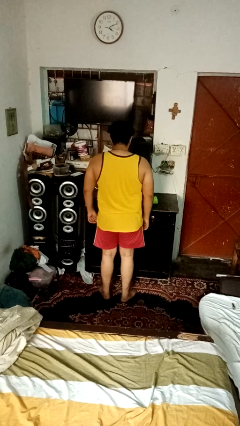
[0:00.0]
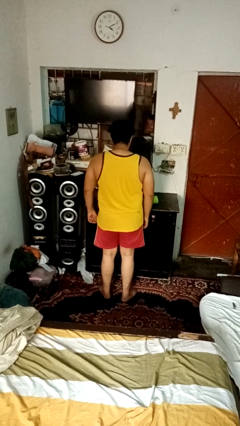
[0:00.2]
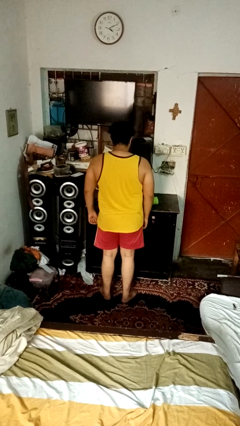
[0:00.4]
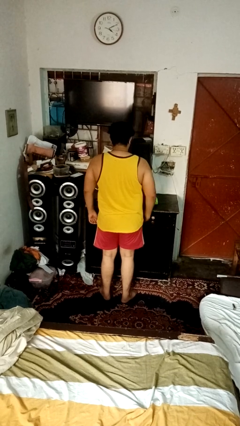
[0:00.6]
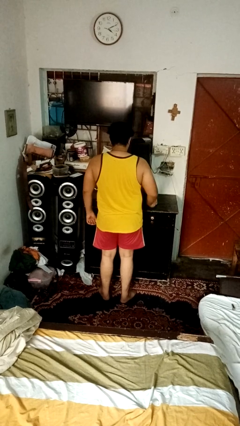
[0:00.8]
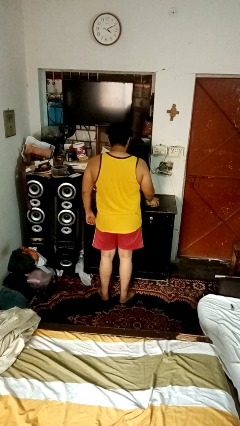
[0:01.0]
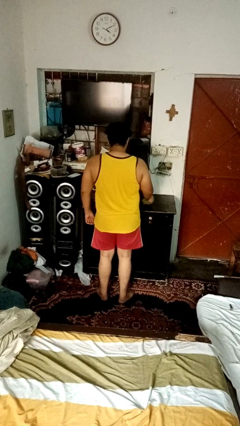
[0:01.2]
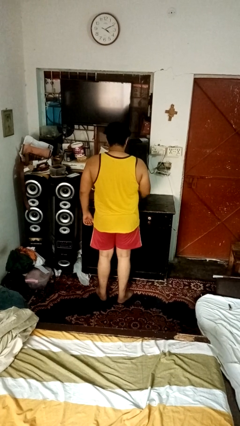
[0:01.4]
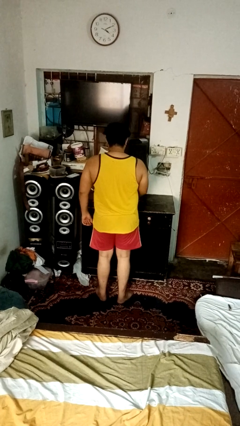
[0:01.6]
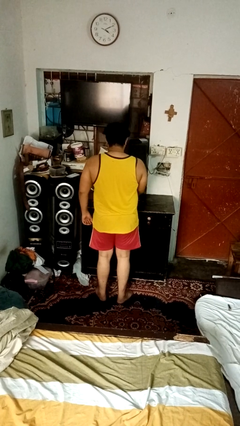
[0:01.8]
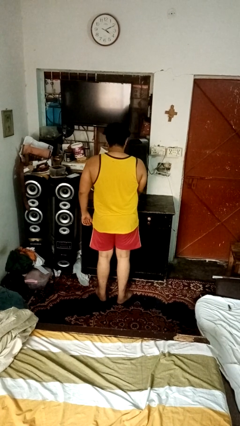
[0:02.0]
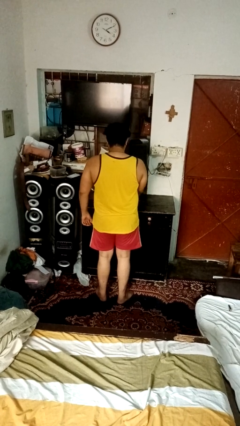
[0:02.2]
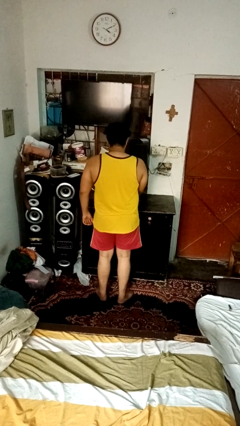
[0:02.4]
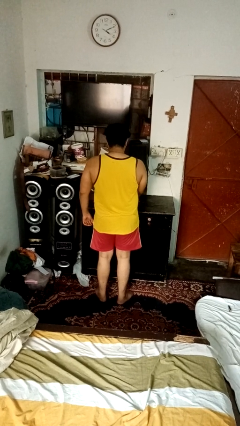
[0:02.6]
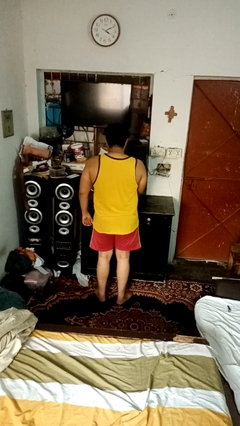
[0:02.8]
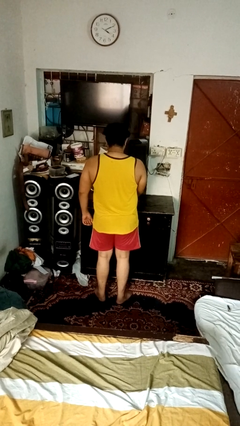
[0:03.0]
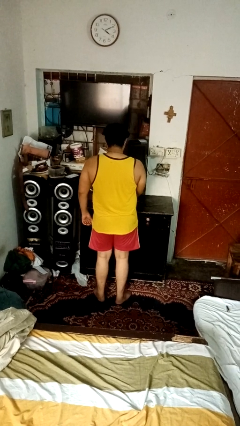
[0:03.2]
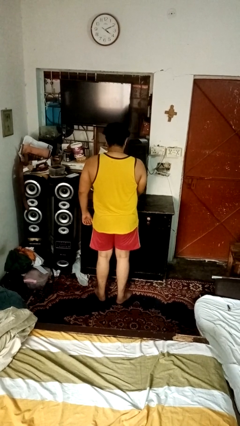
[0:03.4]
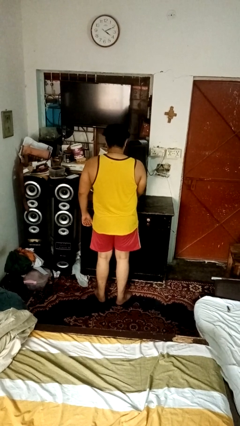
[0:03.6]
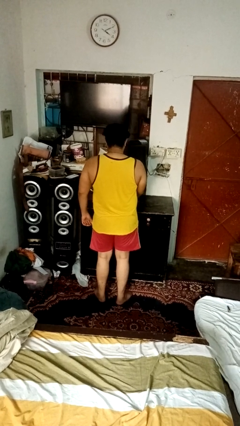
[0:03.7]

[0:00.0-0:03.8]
person sets upright glass

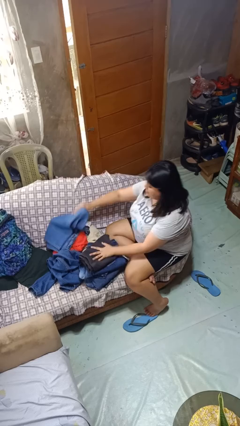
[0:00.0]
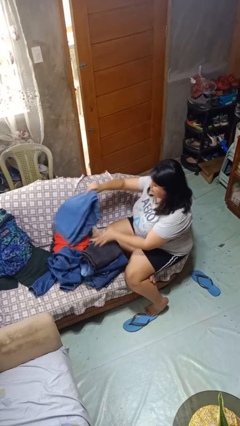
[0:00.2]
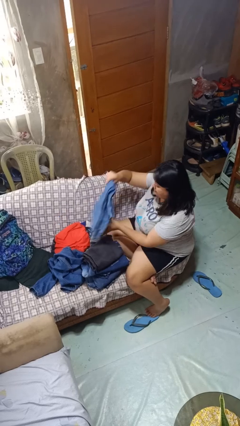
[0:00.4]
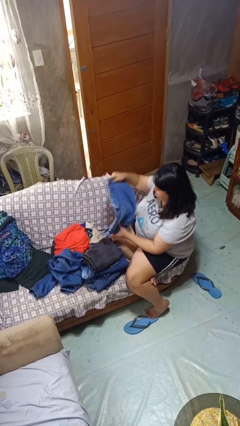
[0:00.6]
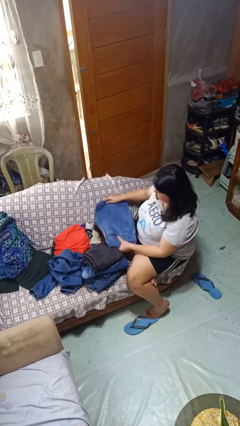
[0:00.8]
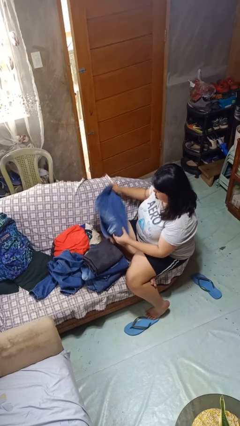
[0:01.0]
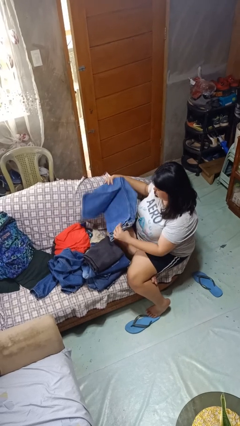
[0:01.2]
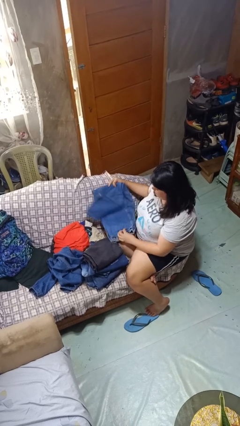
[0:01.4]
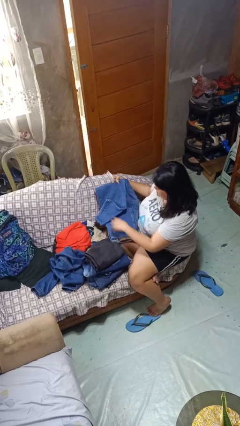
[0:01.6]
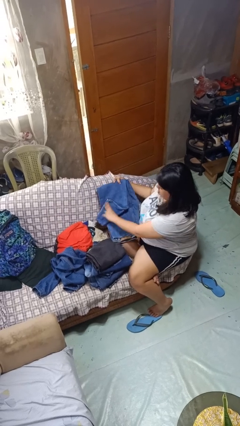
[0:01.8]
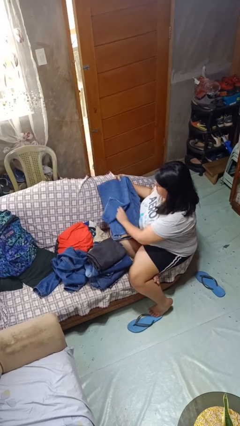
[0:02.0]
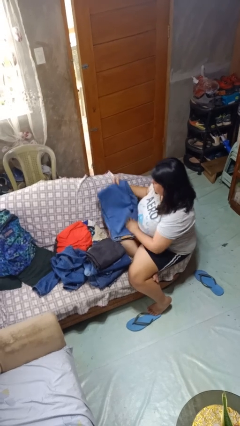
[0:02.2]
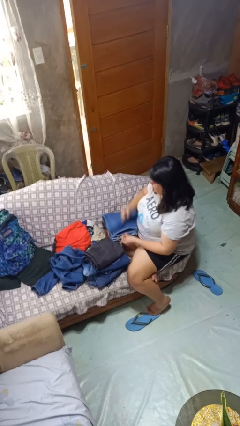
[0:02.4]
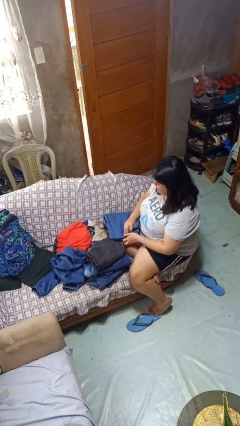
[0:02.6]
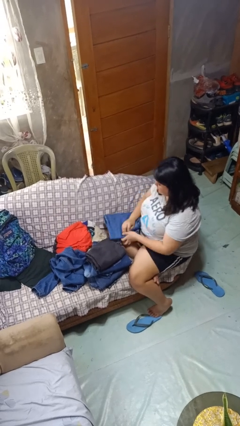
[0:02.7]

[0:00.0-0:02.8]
person folds pants

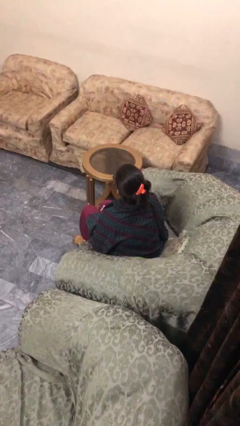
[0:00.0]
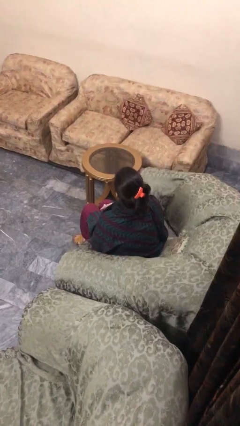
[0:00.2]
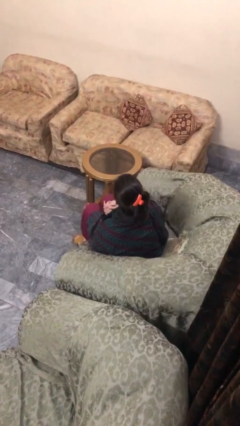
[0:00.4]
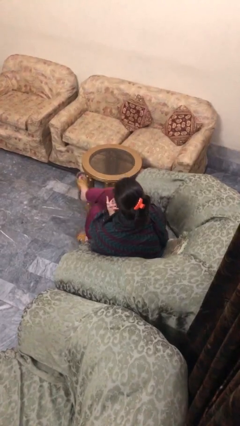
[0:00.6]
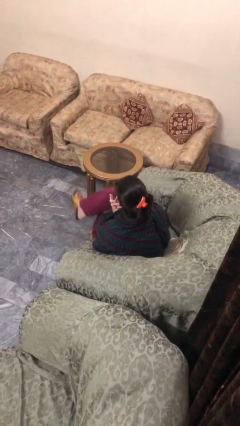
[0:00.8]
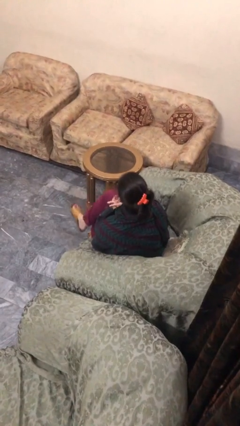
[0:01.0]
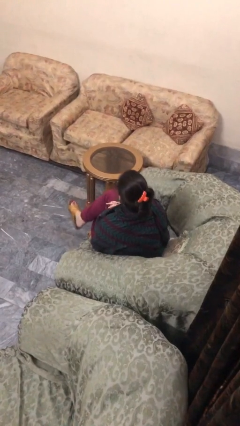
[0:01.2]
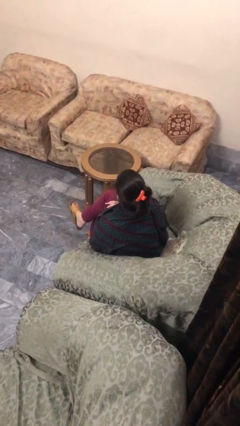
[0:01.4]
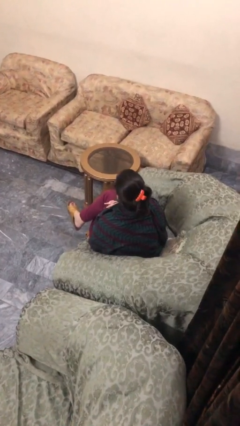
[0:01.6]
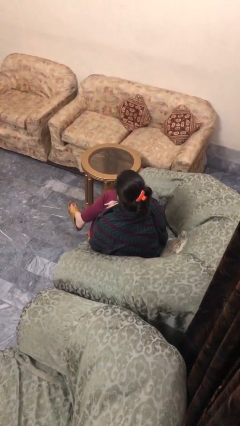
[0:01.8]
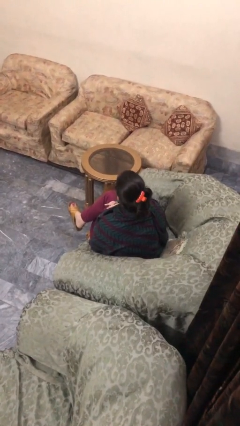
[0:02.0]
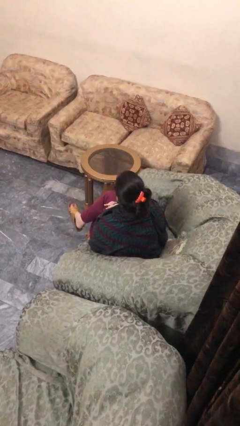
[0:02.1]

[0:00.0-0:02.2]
person crosses legs

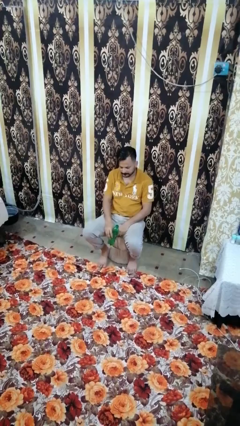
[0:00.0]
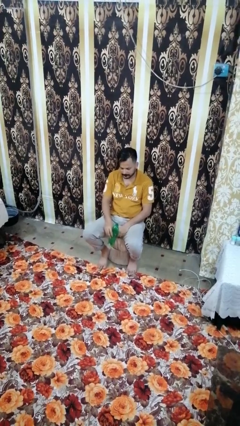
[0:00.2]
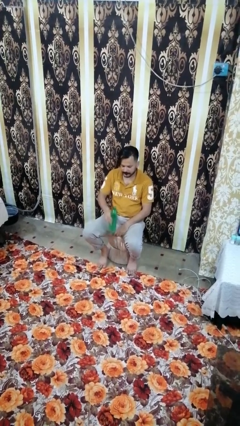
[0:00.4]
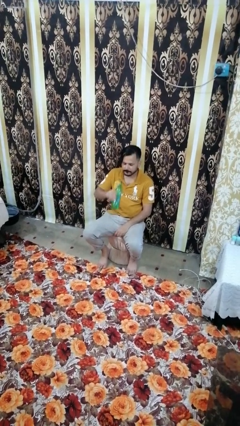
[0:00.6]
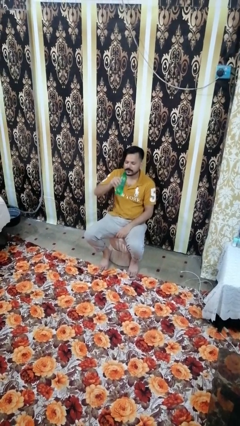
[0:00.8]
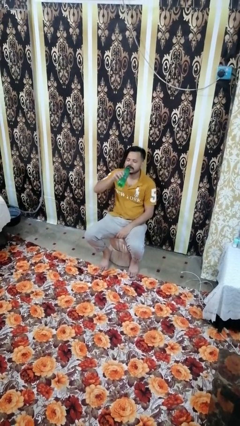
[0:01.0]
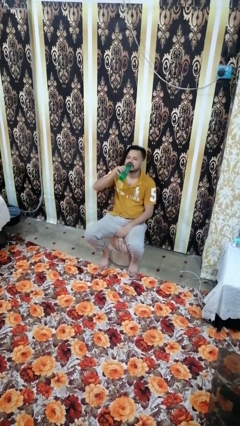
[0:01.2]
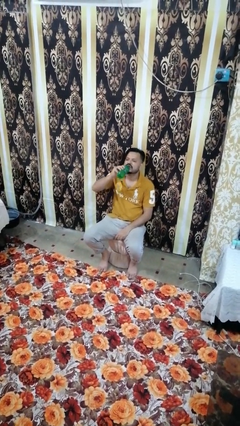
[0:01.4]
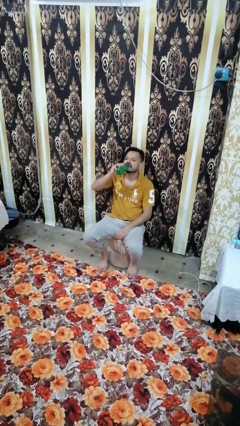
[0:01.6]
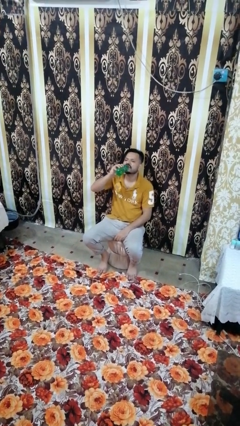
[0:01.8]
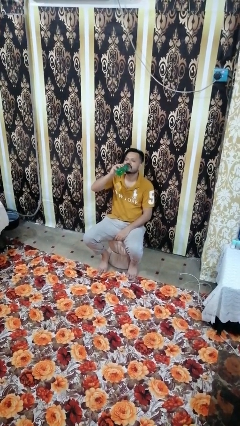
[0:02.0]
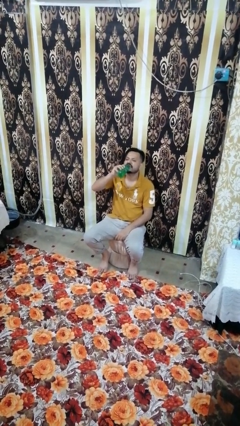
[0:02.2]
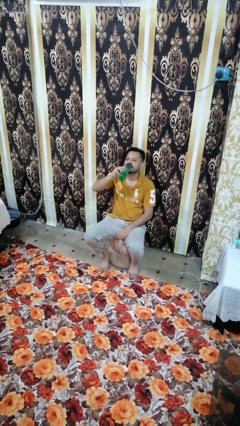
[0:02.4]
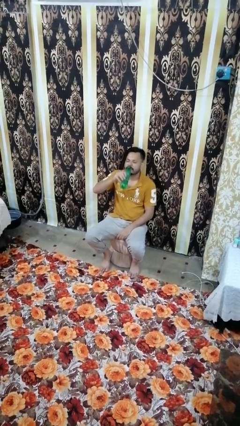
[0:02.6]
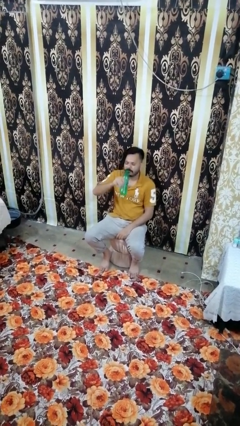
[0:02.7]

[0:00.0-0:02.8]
person drinks from bottle

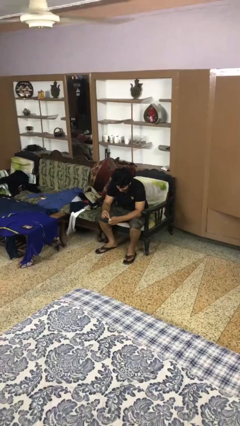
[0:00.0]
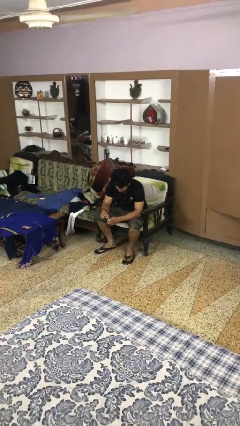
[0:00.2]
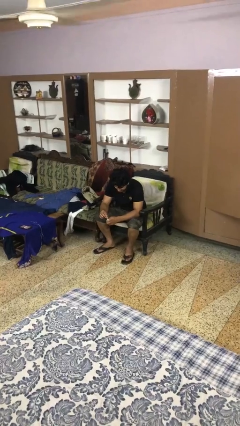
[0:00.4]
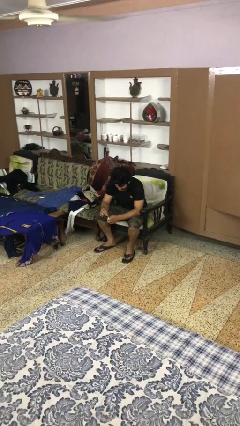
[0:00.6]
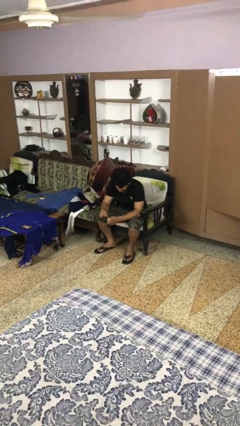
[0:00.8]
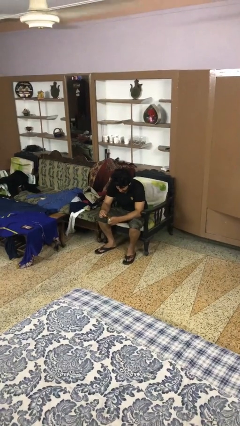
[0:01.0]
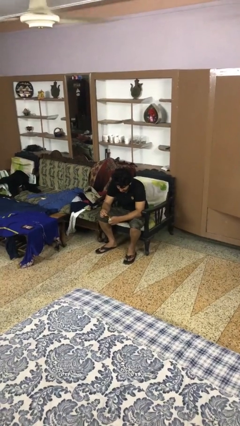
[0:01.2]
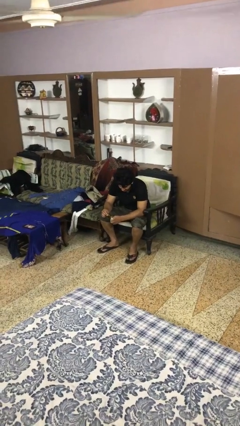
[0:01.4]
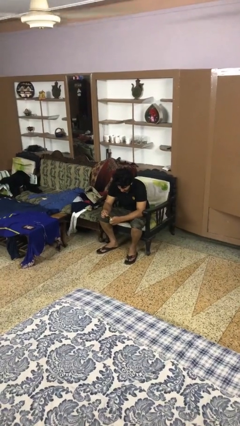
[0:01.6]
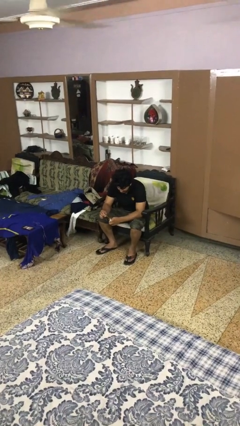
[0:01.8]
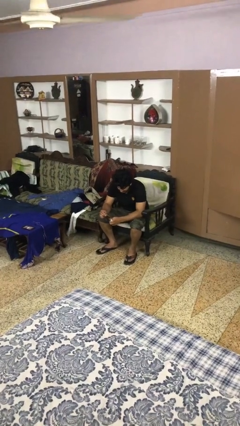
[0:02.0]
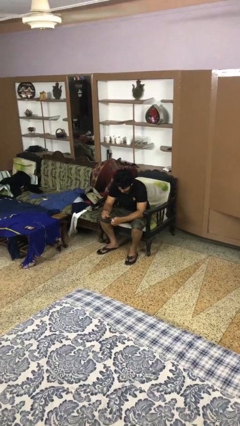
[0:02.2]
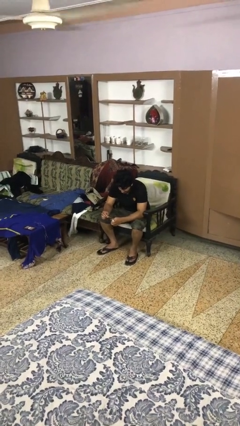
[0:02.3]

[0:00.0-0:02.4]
person paints fingernails

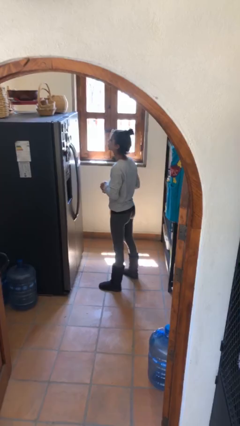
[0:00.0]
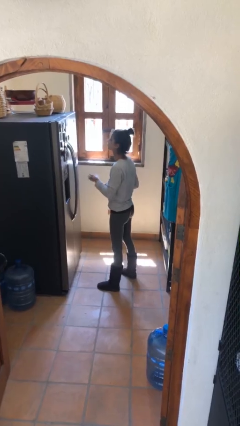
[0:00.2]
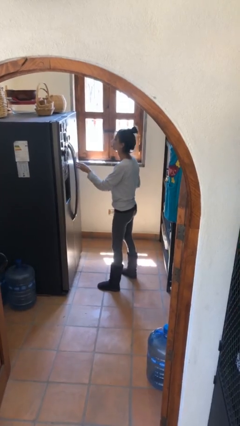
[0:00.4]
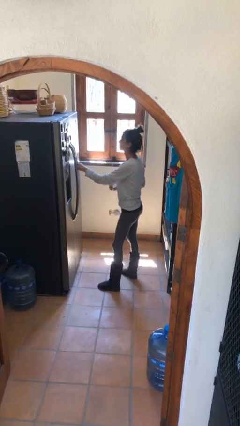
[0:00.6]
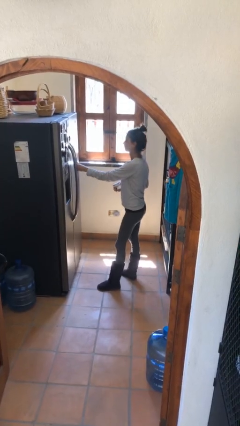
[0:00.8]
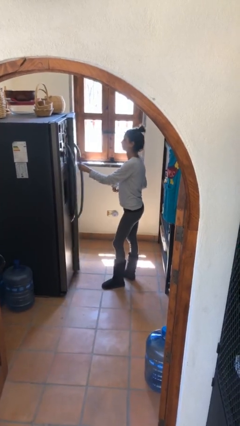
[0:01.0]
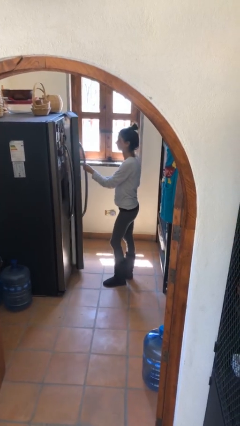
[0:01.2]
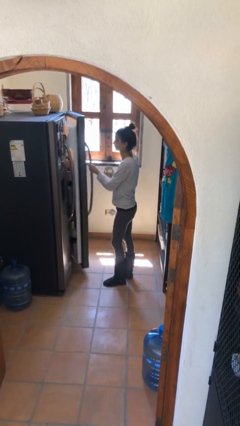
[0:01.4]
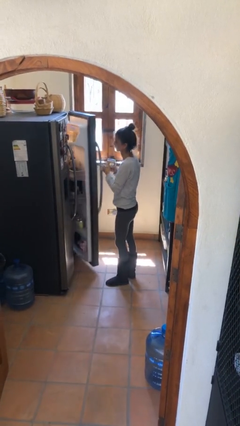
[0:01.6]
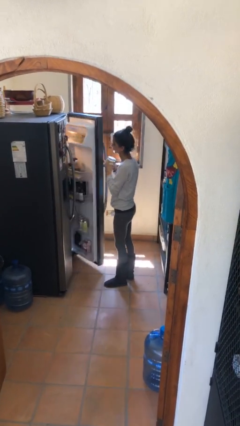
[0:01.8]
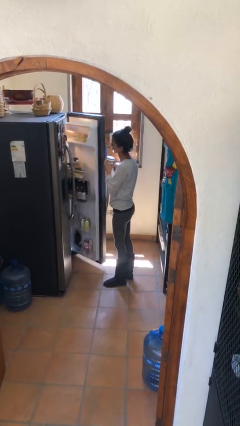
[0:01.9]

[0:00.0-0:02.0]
person opens refrigerator

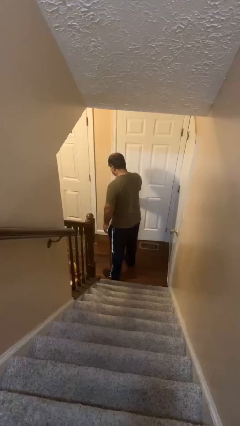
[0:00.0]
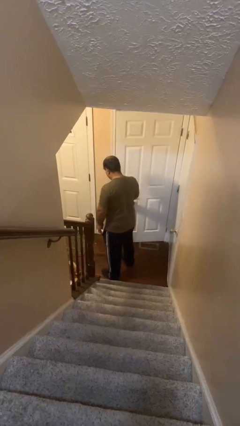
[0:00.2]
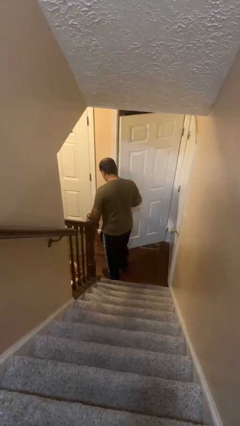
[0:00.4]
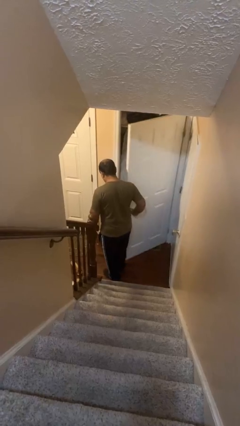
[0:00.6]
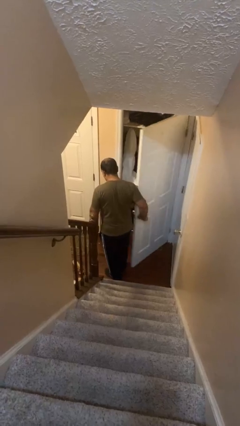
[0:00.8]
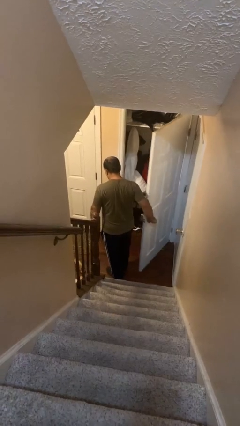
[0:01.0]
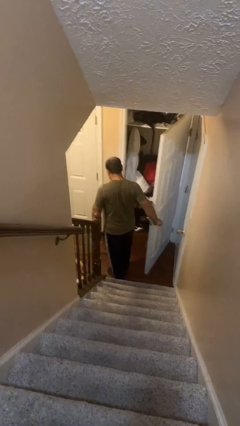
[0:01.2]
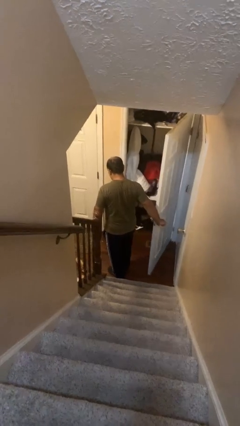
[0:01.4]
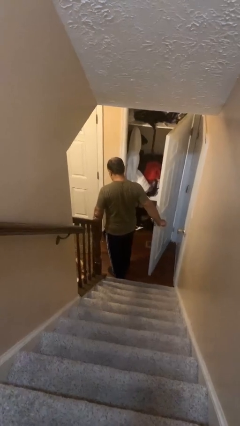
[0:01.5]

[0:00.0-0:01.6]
person opens facility door
